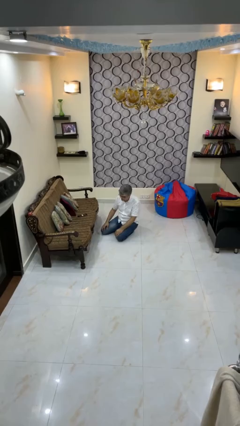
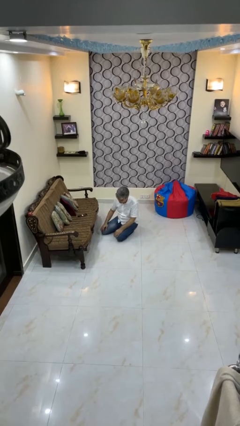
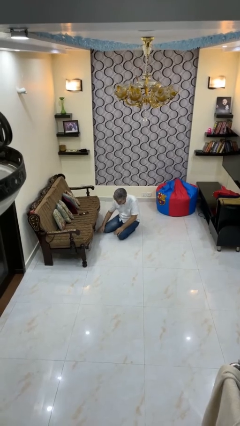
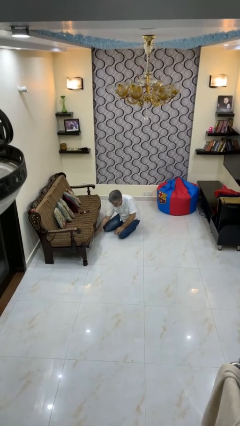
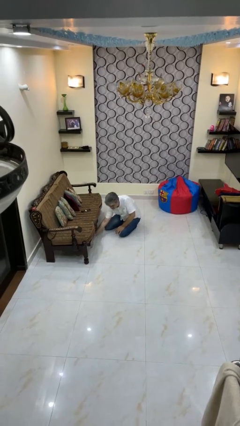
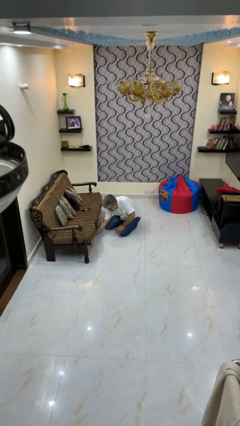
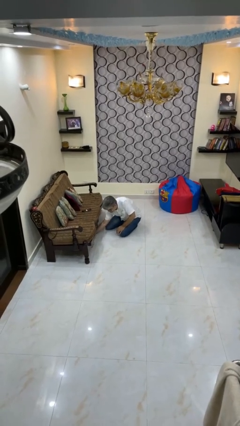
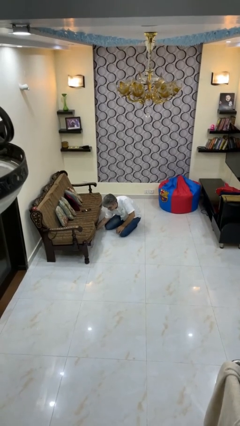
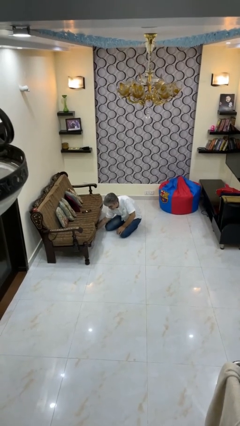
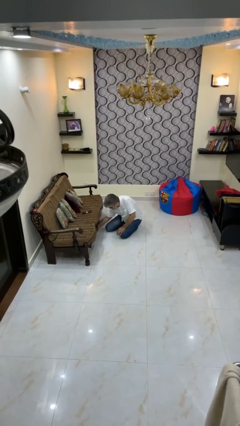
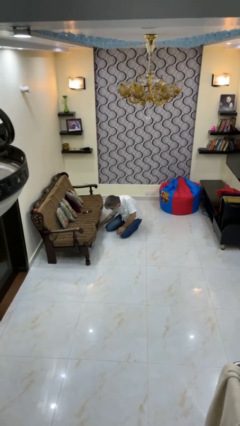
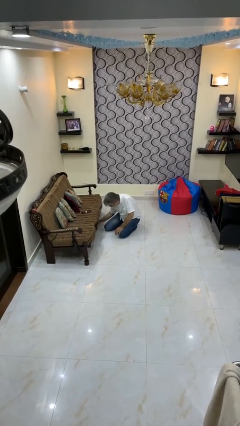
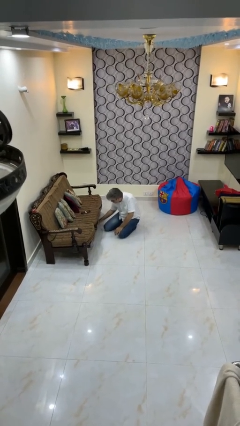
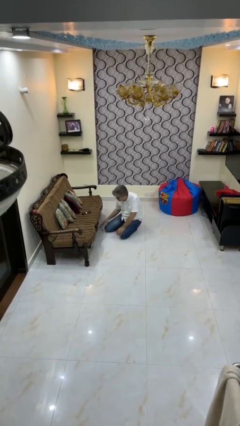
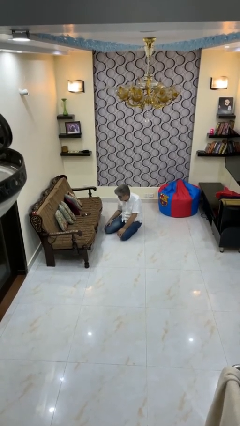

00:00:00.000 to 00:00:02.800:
person searches under couch

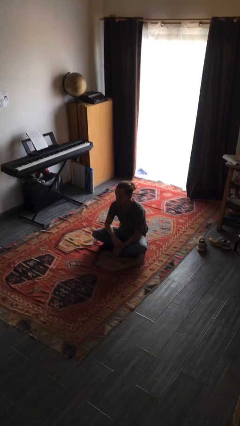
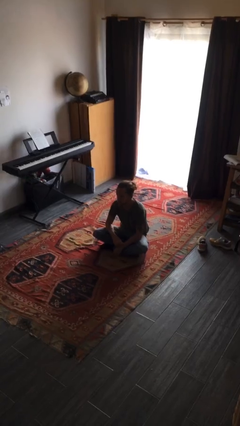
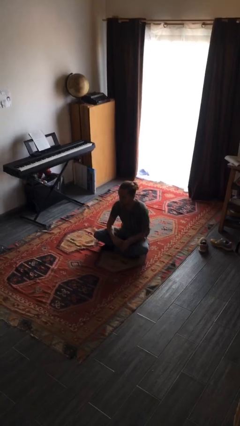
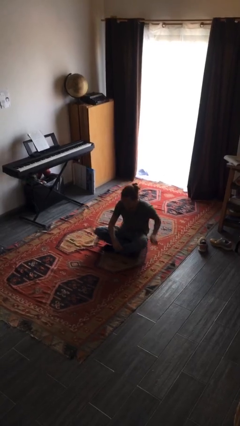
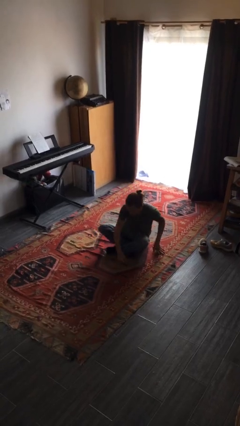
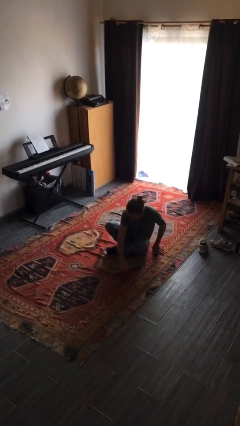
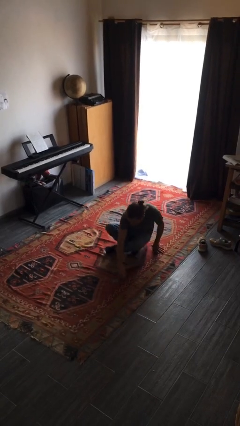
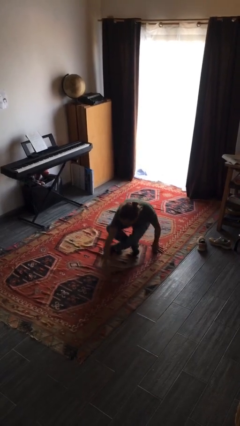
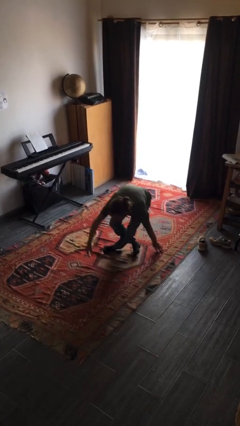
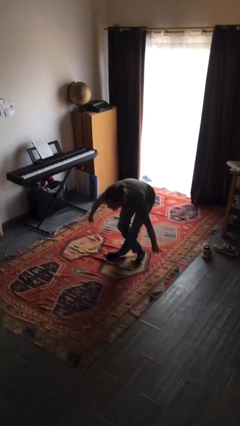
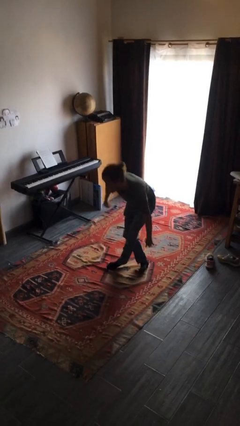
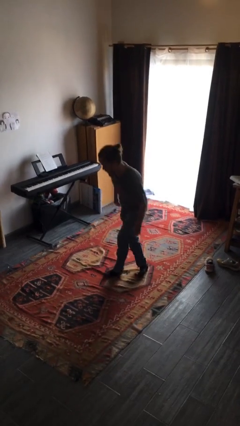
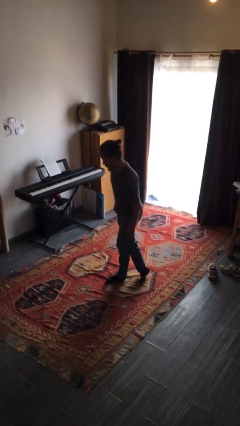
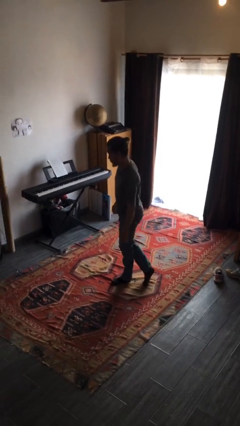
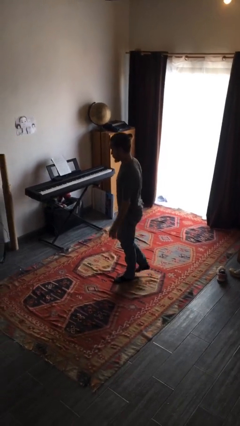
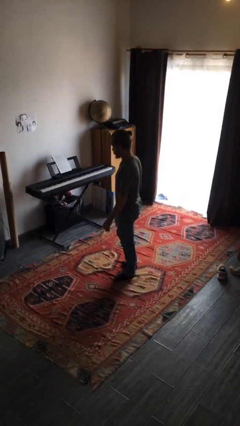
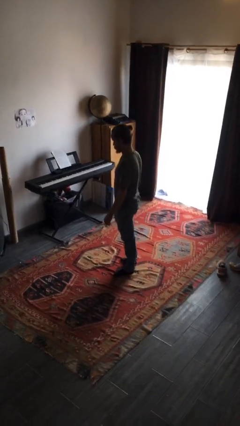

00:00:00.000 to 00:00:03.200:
person stands up from floor

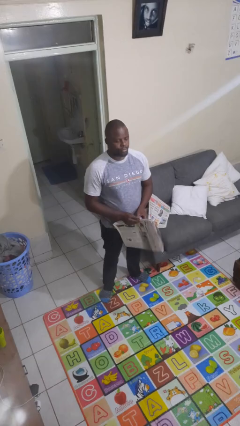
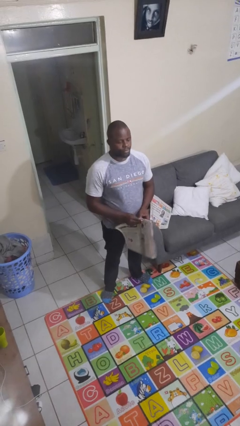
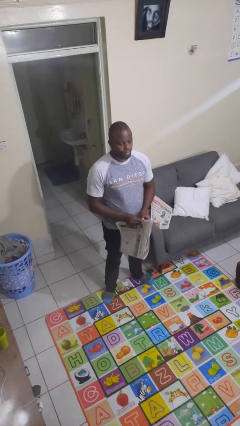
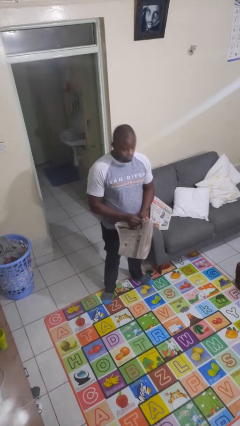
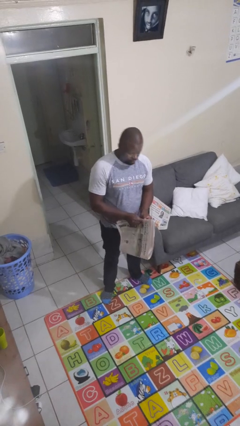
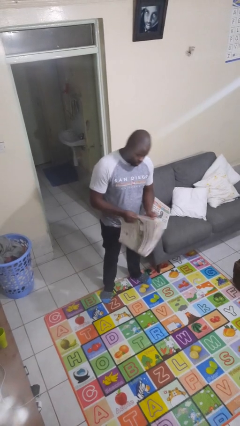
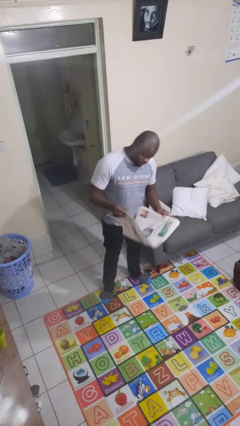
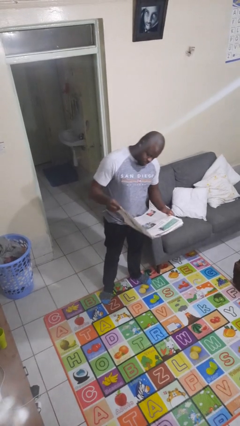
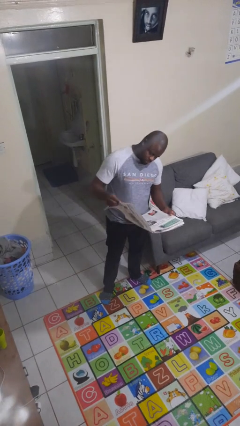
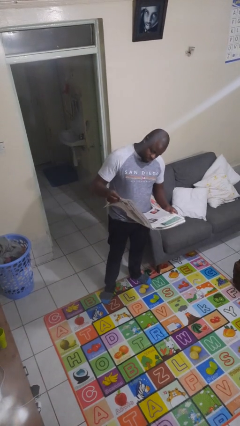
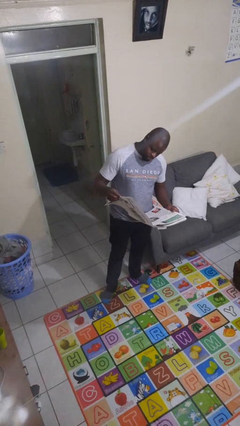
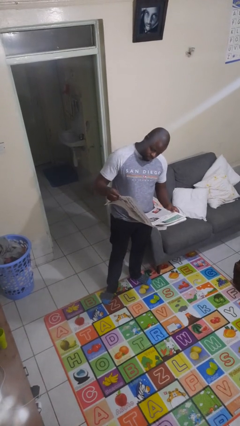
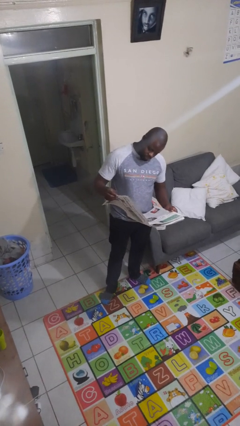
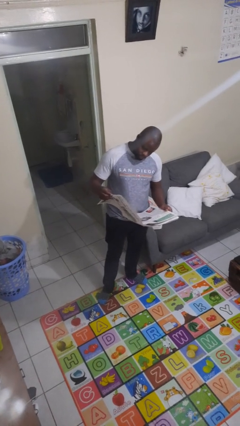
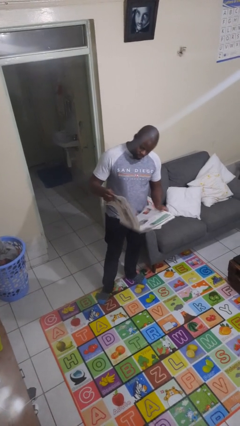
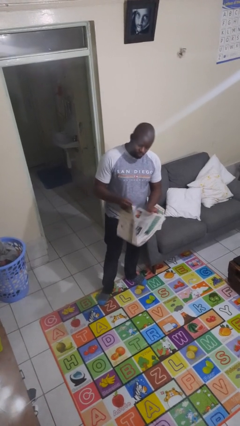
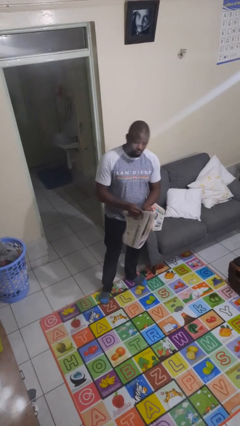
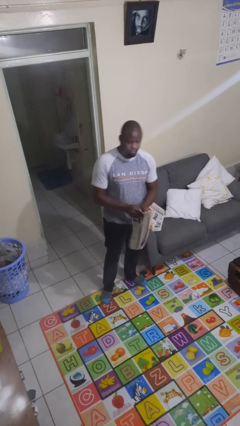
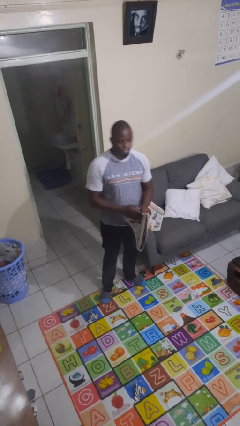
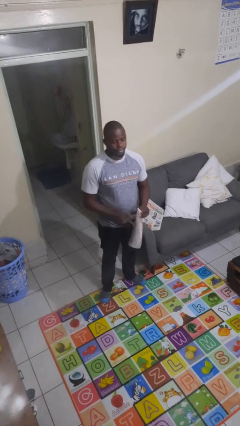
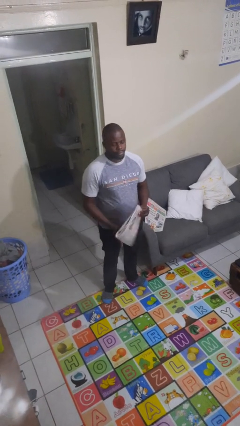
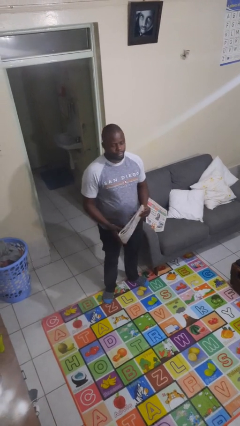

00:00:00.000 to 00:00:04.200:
person reads newspaper

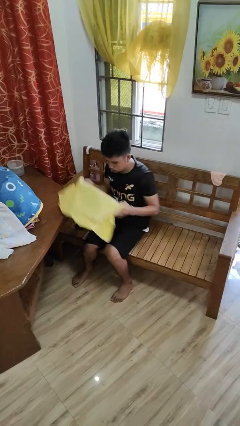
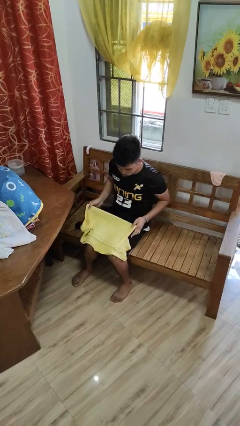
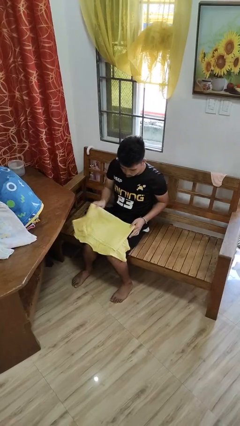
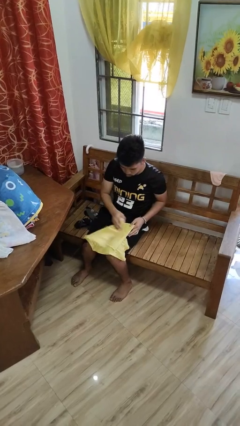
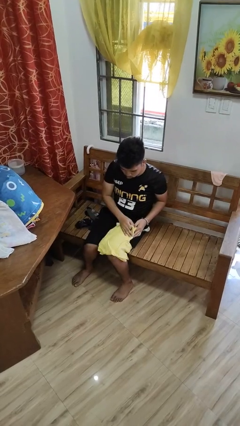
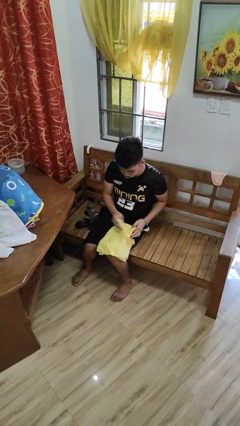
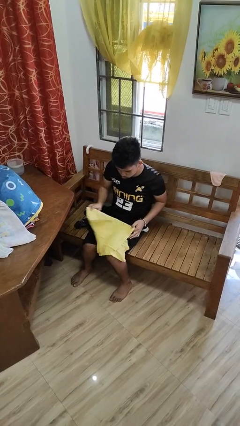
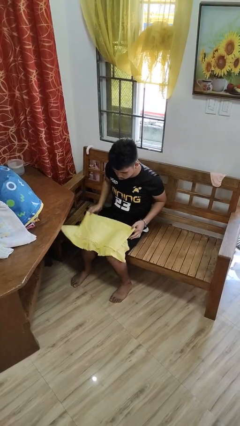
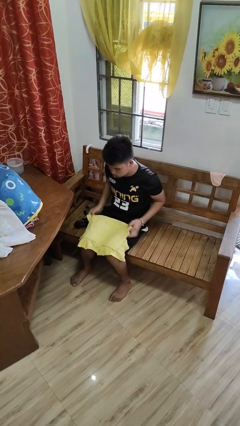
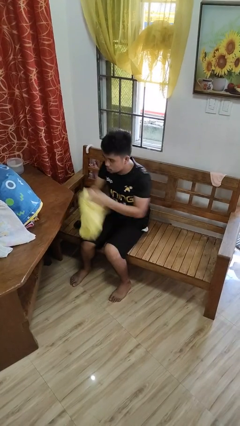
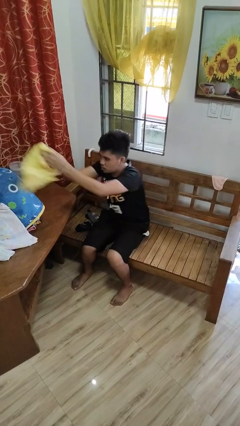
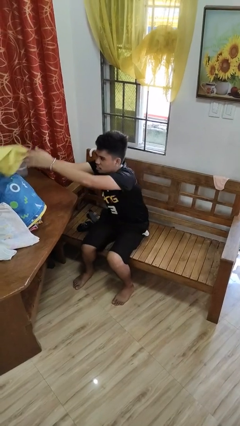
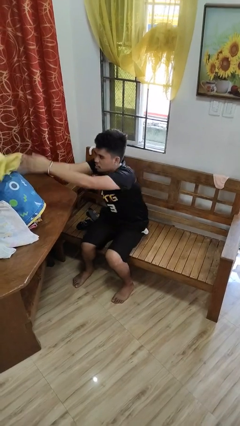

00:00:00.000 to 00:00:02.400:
person folds shirt

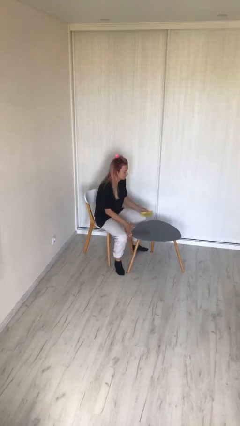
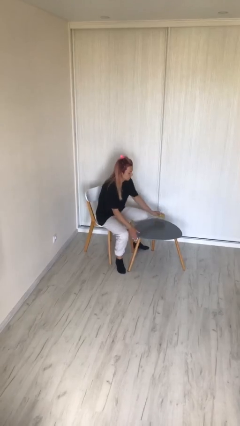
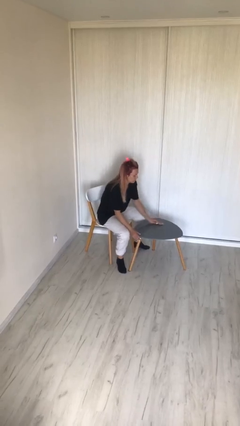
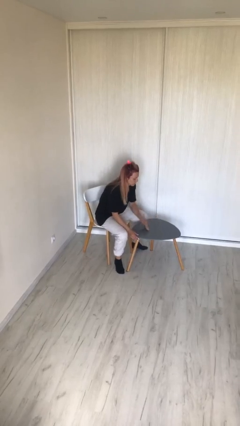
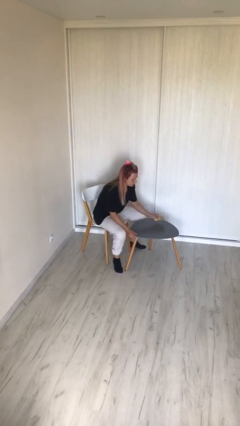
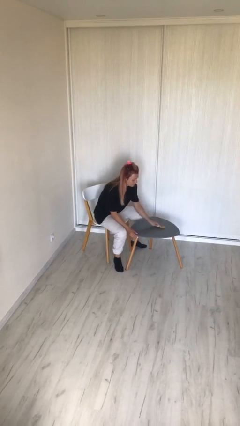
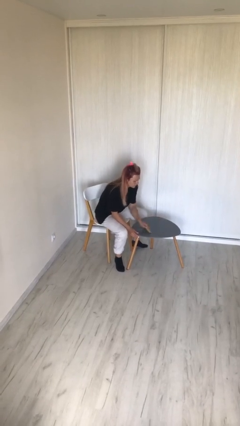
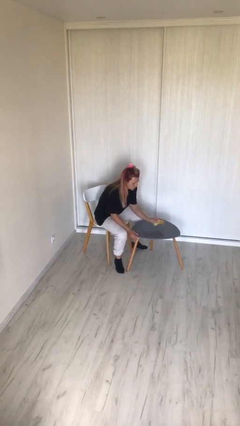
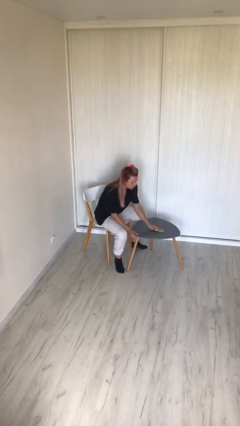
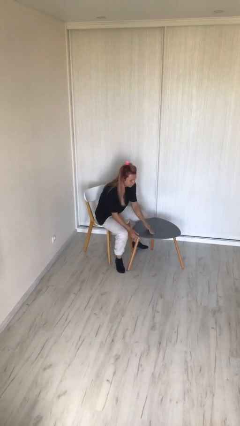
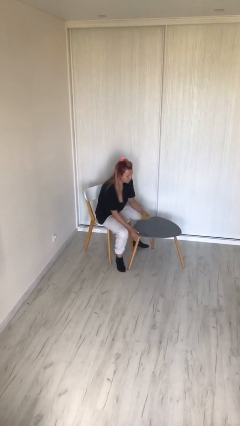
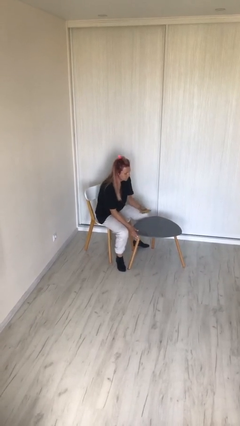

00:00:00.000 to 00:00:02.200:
person cleans table with rag

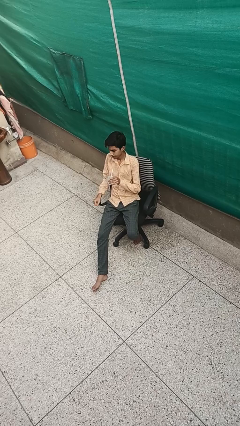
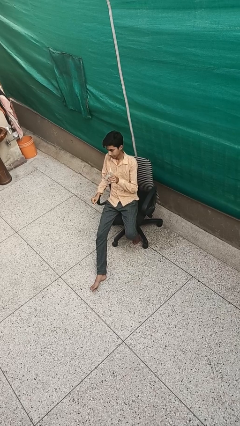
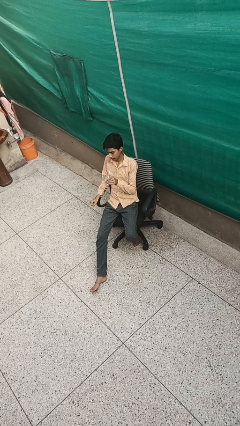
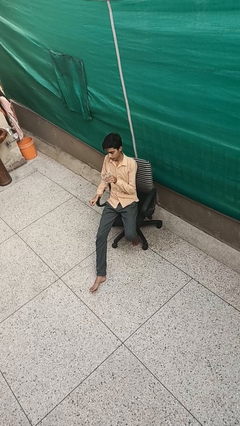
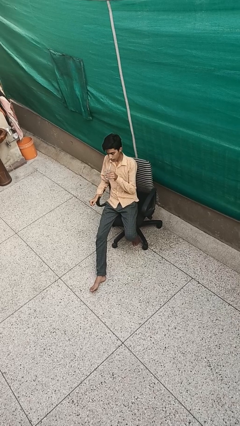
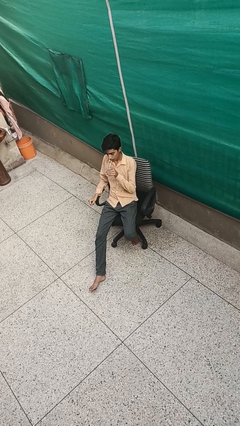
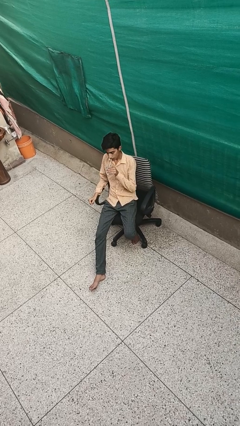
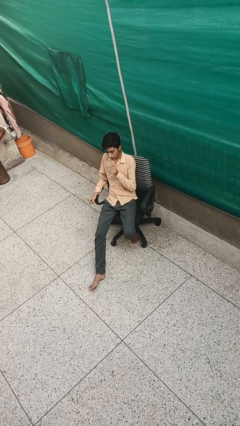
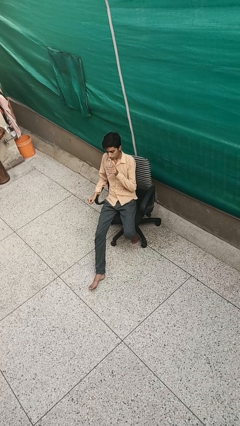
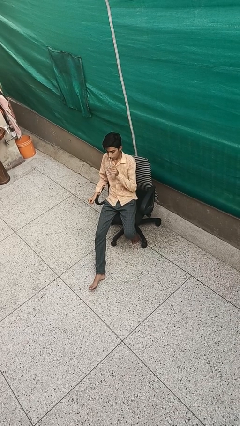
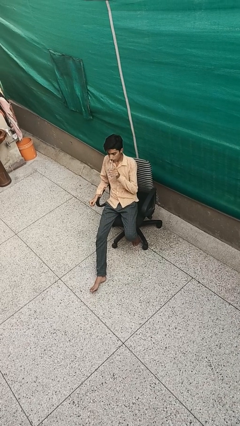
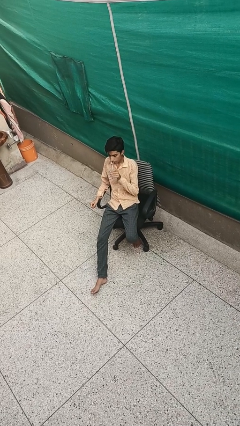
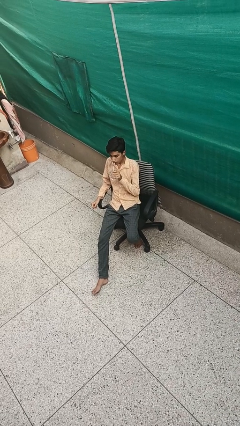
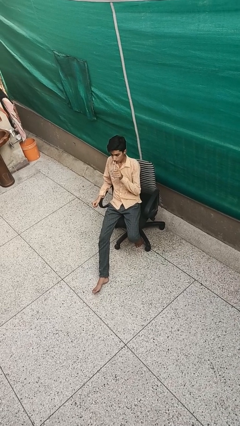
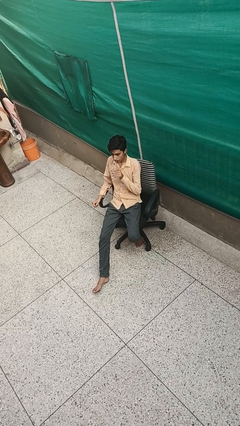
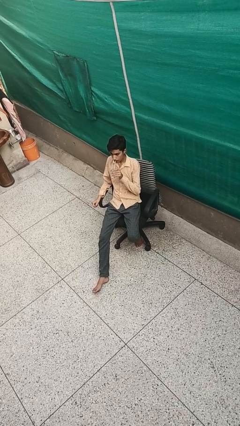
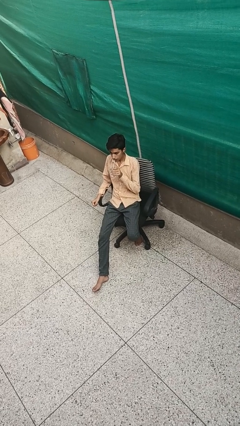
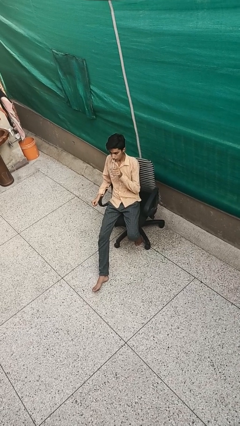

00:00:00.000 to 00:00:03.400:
person drinks from straw
